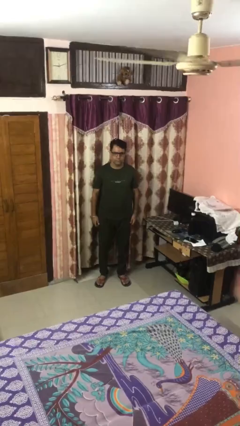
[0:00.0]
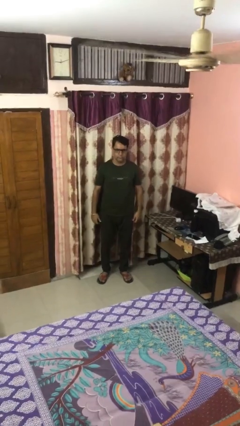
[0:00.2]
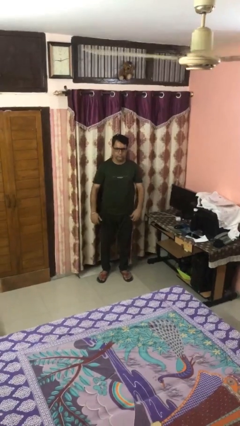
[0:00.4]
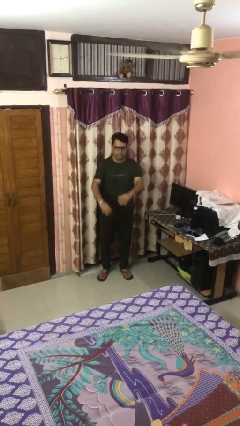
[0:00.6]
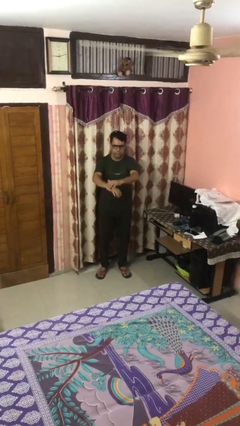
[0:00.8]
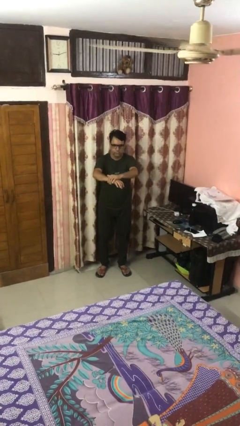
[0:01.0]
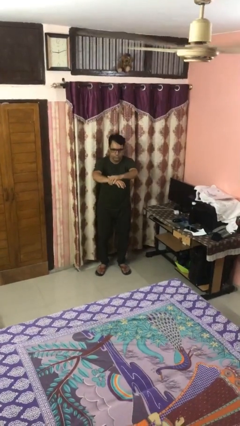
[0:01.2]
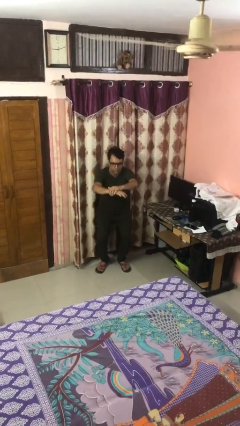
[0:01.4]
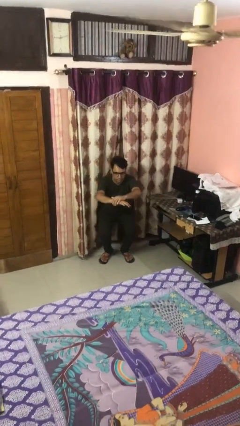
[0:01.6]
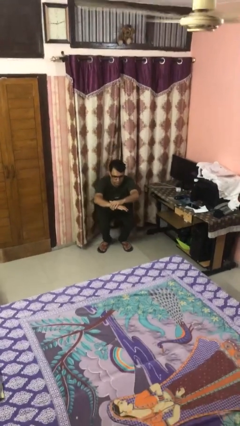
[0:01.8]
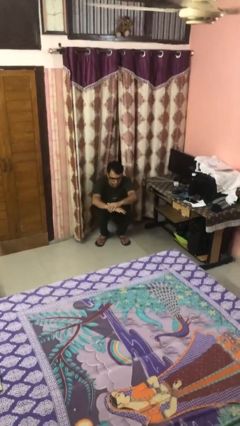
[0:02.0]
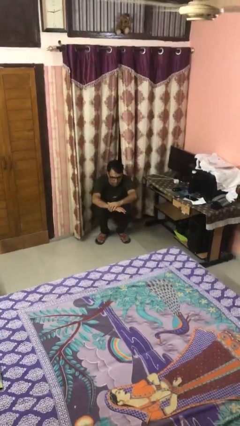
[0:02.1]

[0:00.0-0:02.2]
person squats

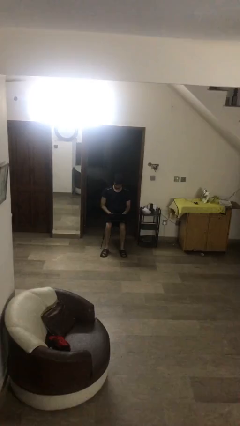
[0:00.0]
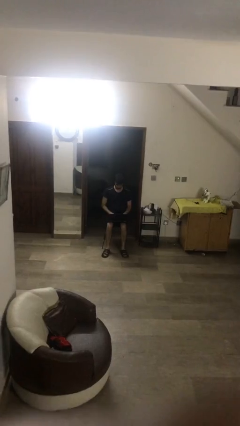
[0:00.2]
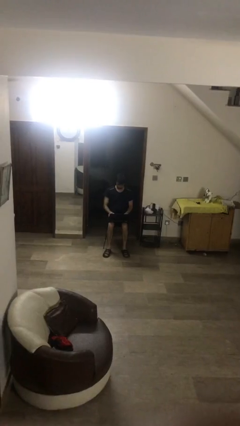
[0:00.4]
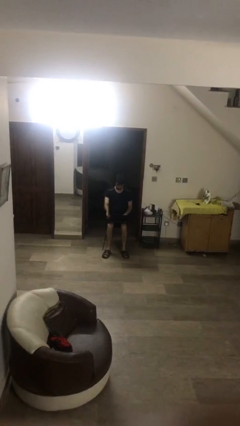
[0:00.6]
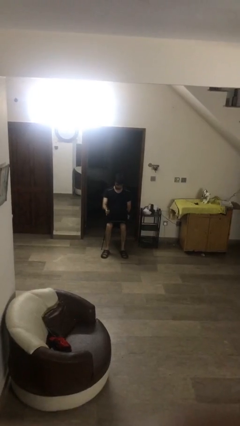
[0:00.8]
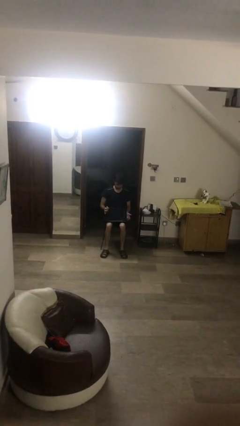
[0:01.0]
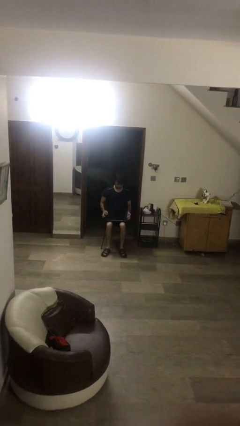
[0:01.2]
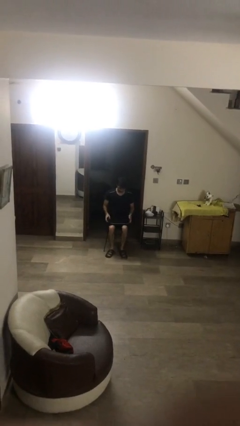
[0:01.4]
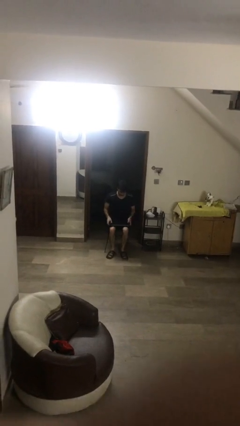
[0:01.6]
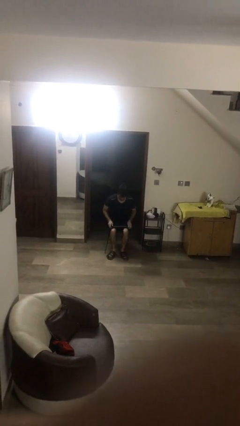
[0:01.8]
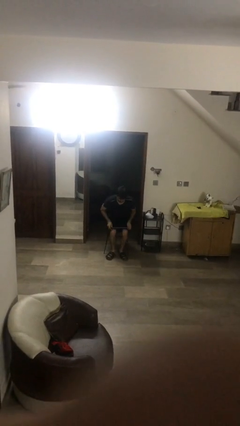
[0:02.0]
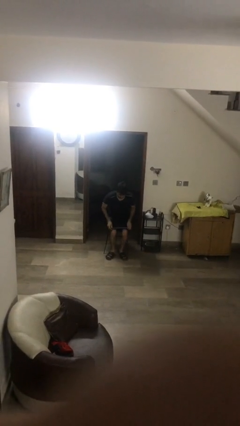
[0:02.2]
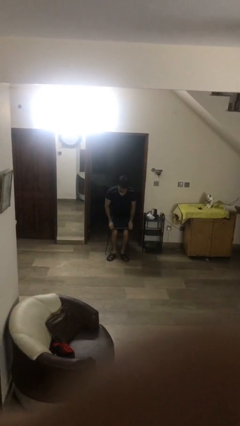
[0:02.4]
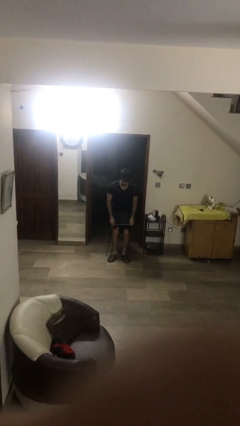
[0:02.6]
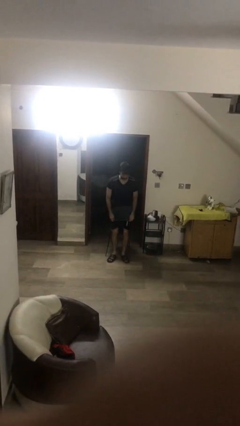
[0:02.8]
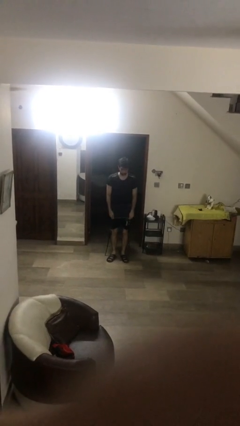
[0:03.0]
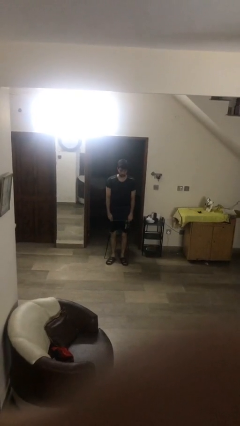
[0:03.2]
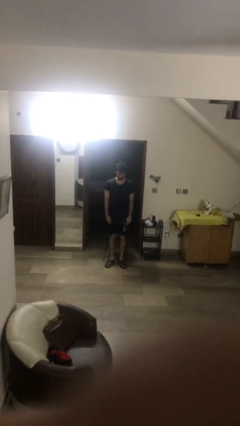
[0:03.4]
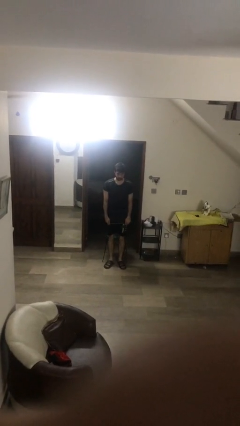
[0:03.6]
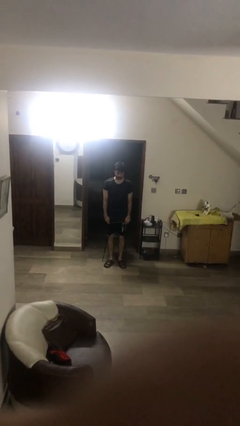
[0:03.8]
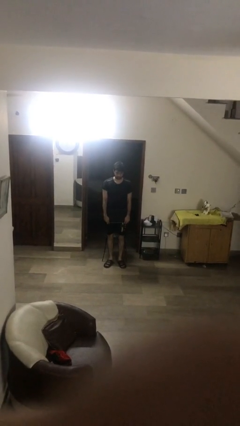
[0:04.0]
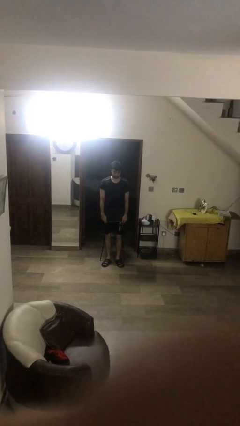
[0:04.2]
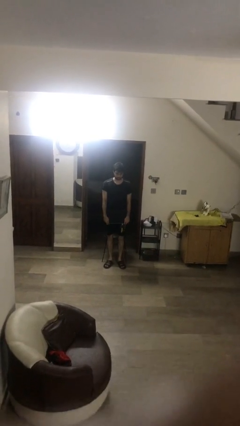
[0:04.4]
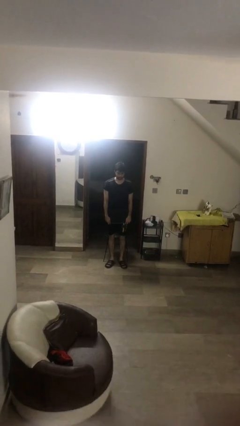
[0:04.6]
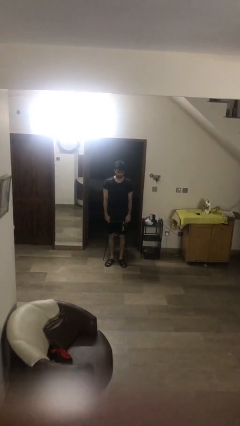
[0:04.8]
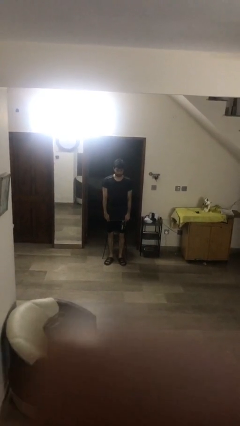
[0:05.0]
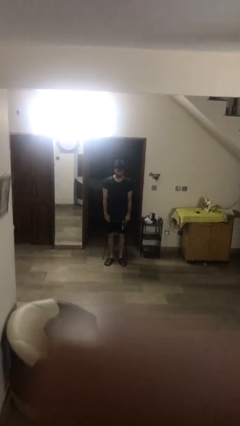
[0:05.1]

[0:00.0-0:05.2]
person stands up

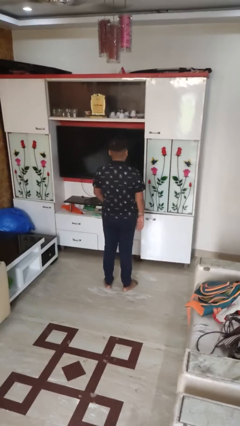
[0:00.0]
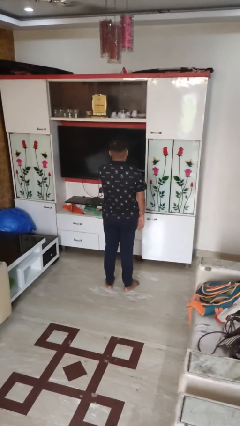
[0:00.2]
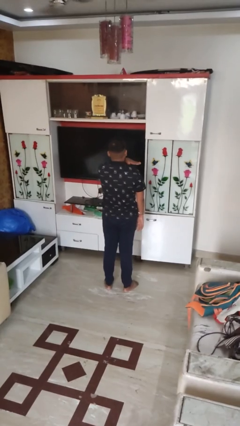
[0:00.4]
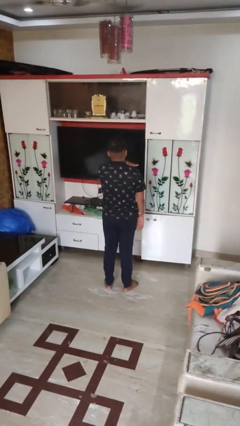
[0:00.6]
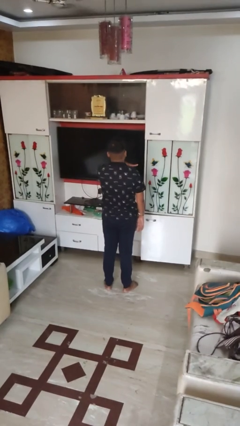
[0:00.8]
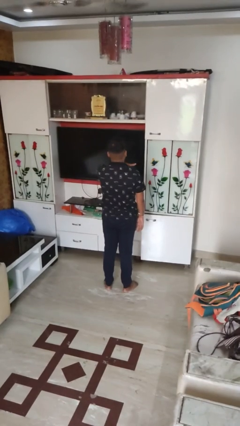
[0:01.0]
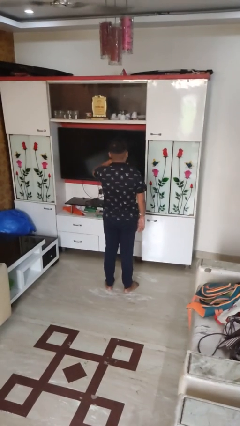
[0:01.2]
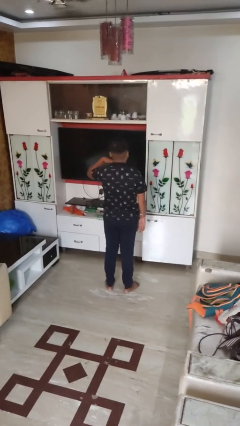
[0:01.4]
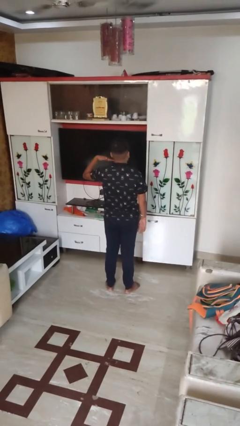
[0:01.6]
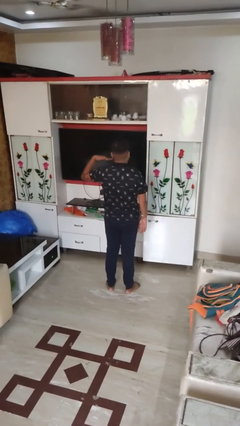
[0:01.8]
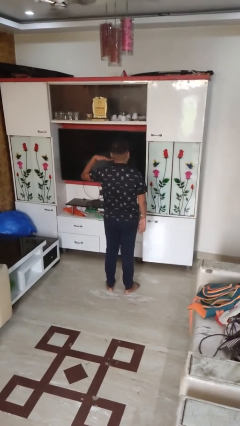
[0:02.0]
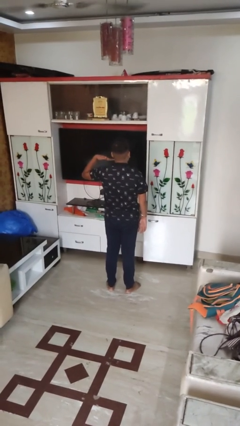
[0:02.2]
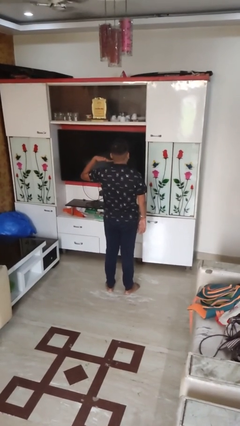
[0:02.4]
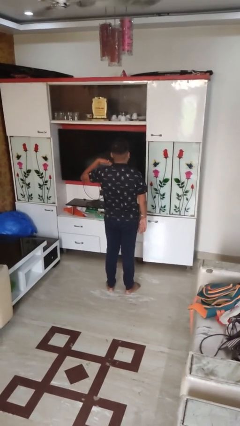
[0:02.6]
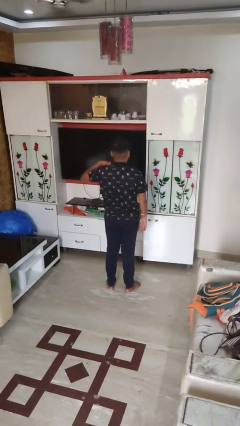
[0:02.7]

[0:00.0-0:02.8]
person gestures cut

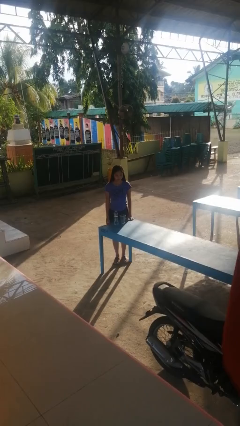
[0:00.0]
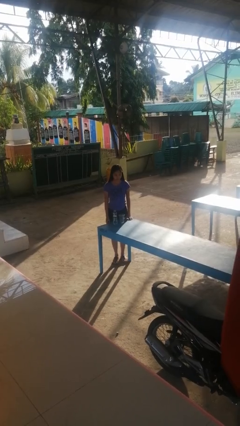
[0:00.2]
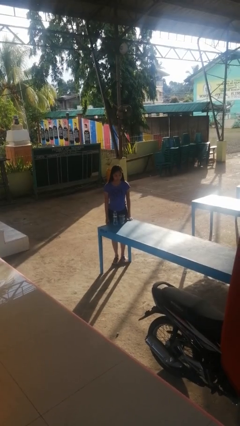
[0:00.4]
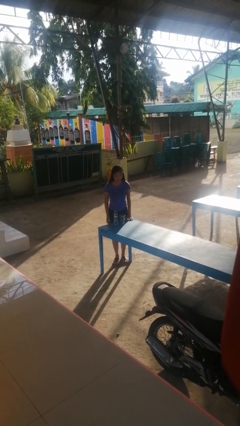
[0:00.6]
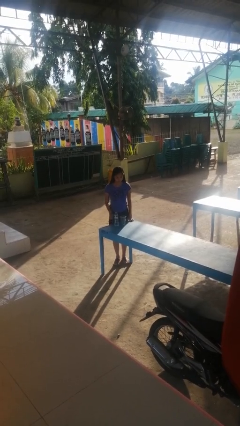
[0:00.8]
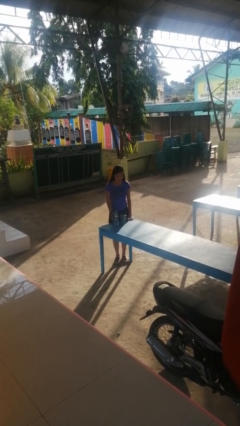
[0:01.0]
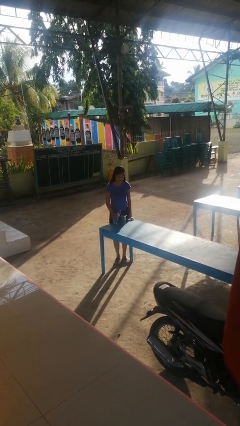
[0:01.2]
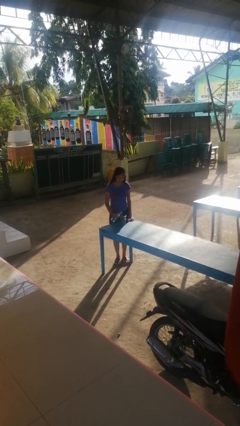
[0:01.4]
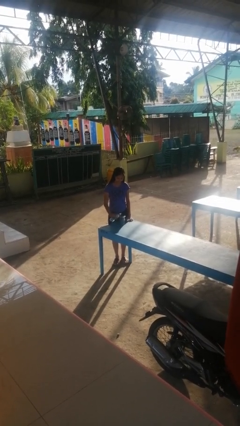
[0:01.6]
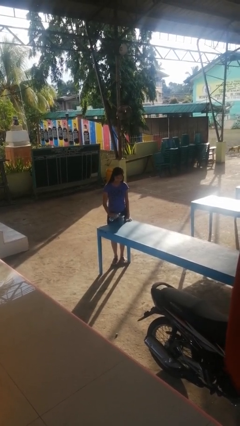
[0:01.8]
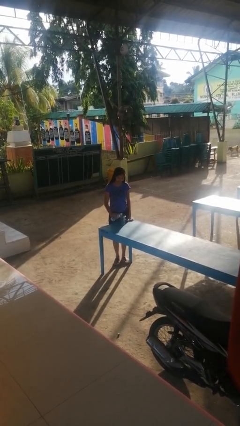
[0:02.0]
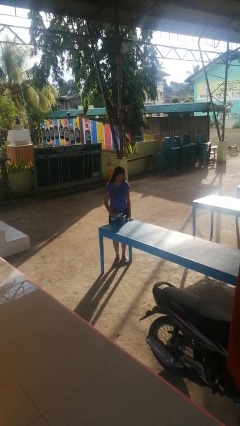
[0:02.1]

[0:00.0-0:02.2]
person pours liquid into cup

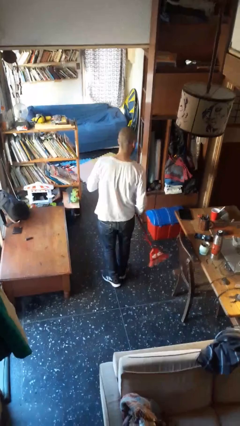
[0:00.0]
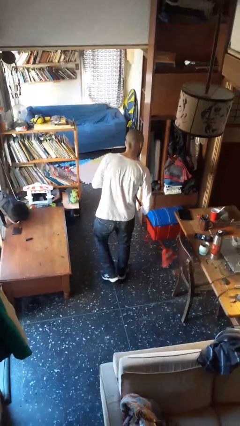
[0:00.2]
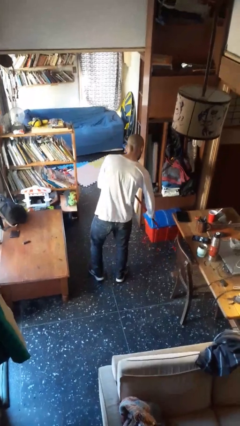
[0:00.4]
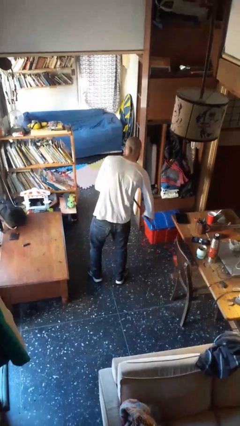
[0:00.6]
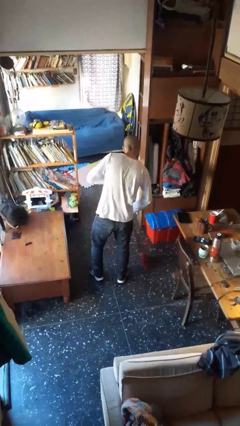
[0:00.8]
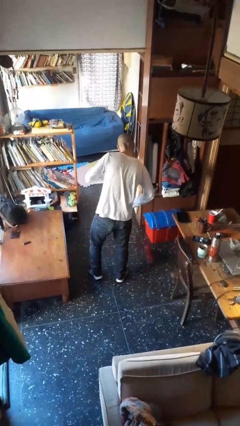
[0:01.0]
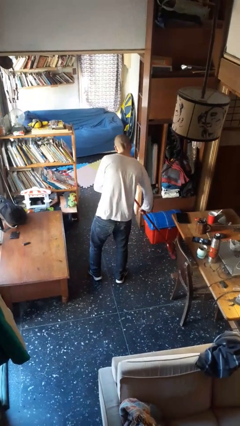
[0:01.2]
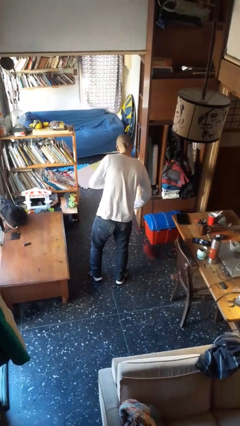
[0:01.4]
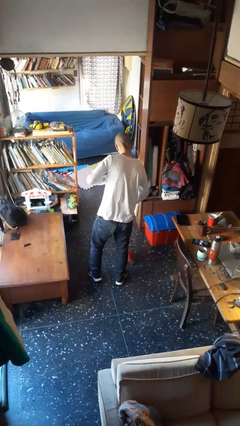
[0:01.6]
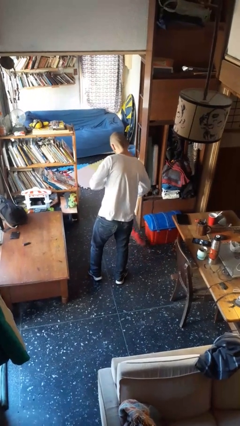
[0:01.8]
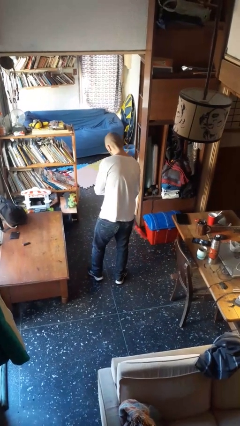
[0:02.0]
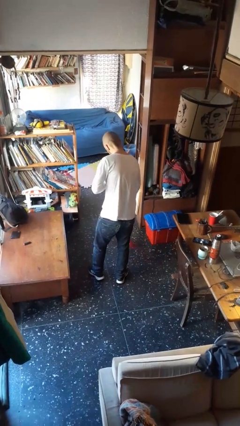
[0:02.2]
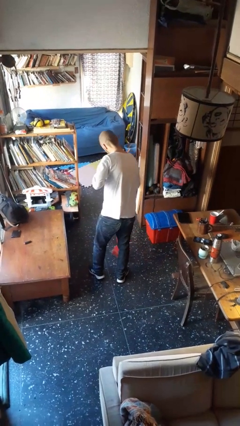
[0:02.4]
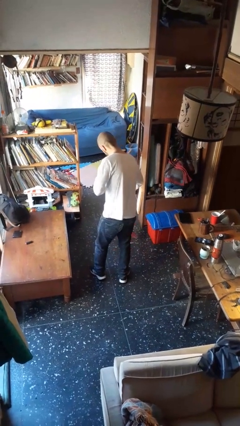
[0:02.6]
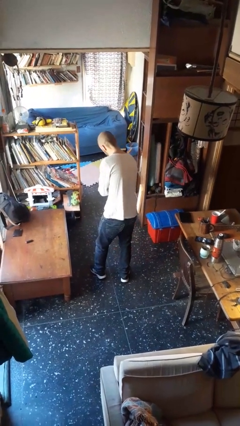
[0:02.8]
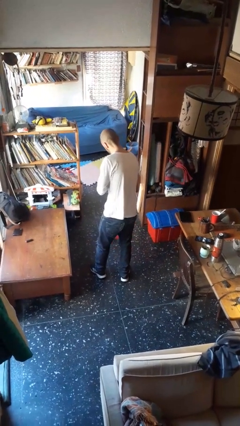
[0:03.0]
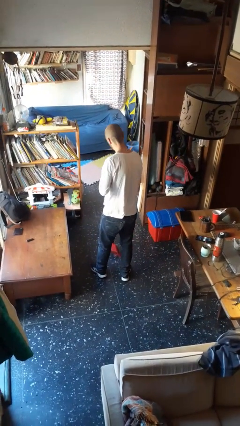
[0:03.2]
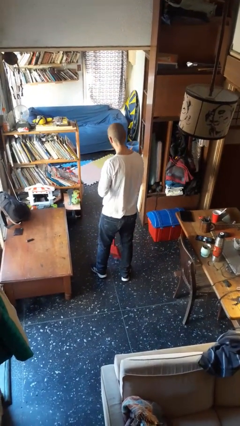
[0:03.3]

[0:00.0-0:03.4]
person sweeps floor

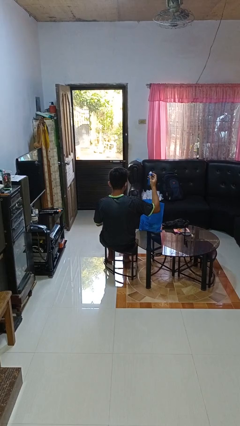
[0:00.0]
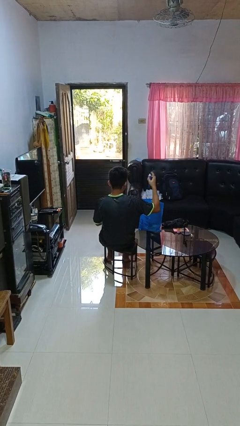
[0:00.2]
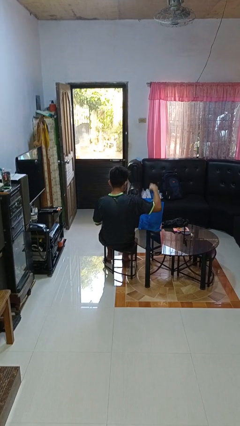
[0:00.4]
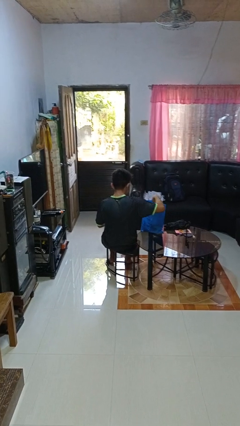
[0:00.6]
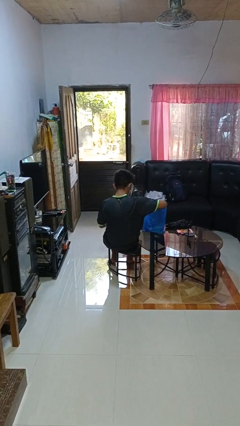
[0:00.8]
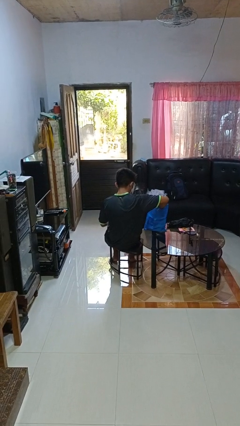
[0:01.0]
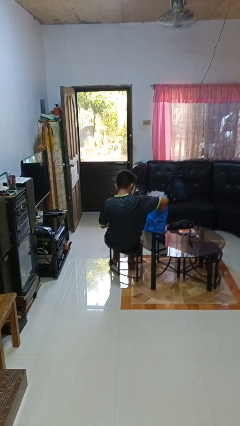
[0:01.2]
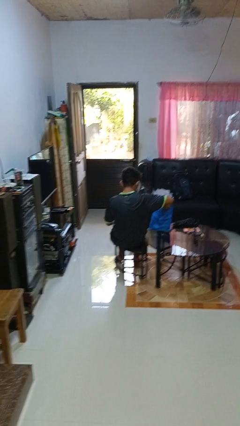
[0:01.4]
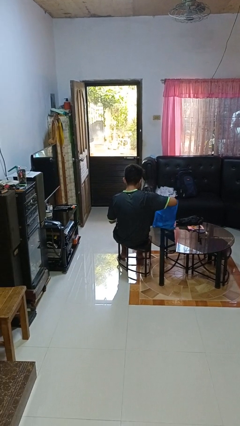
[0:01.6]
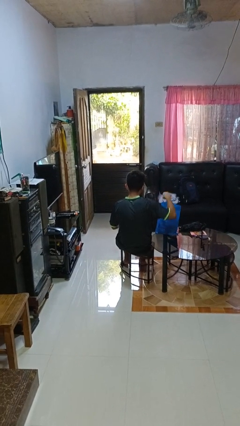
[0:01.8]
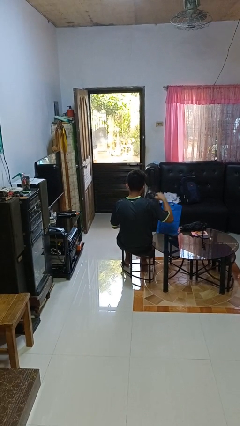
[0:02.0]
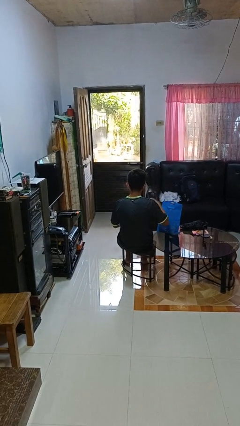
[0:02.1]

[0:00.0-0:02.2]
person puts object into bag
